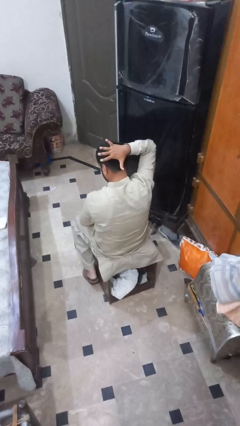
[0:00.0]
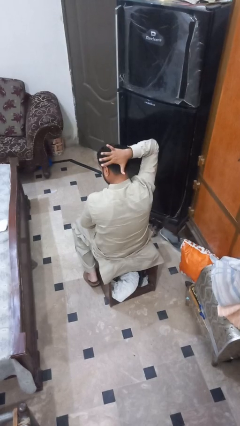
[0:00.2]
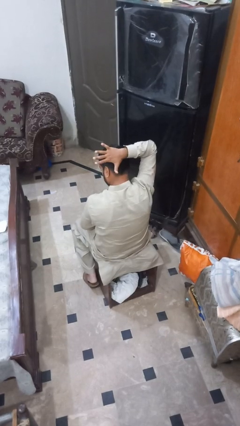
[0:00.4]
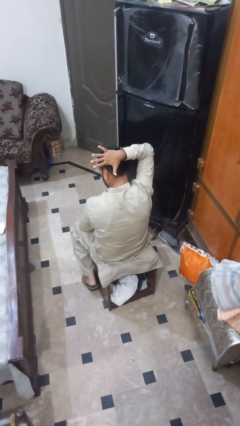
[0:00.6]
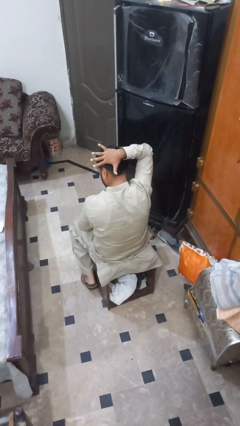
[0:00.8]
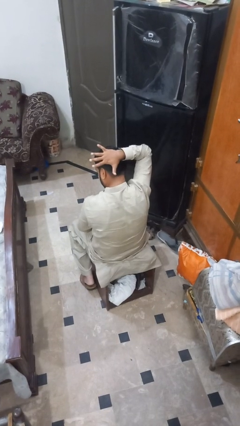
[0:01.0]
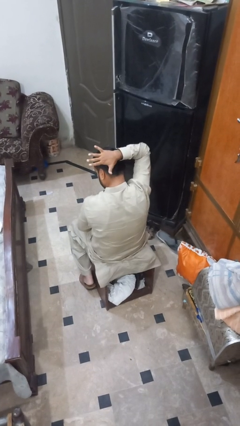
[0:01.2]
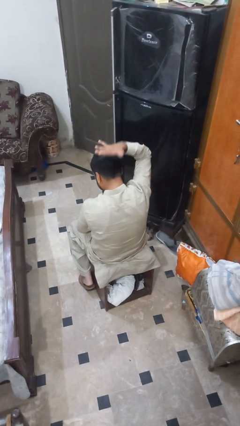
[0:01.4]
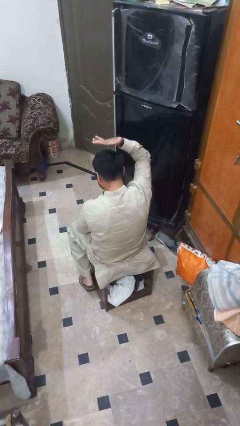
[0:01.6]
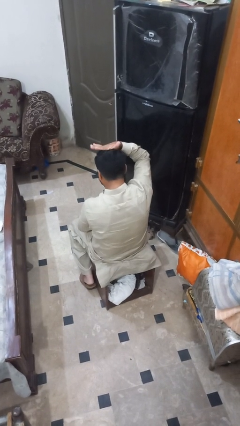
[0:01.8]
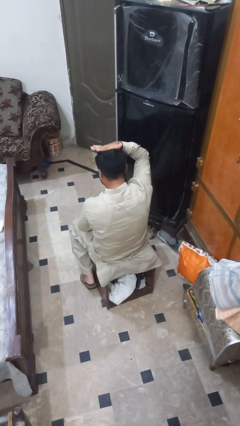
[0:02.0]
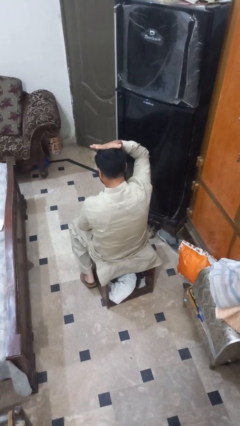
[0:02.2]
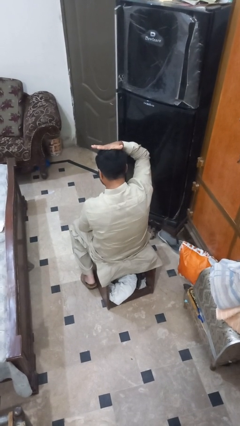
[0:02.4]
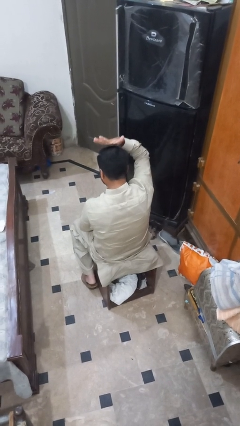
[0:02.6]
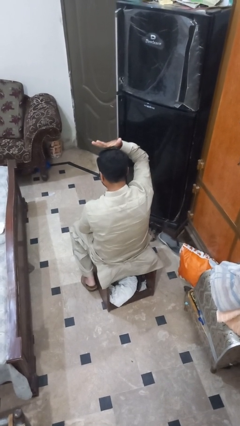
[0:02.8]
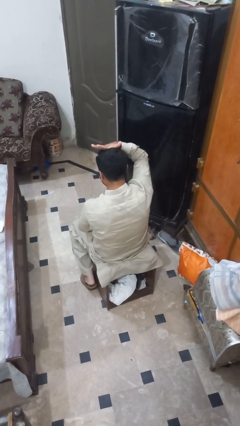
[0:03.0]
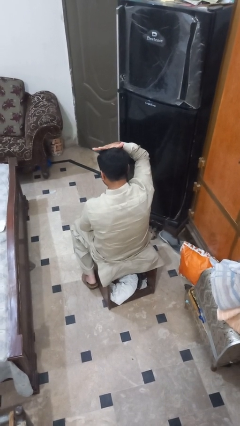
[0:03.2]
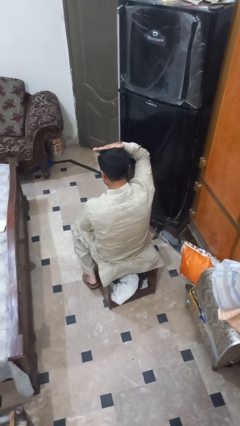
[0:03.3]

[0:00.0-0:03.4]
person pats head

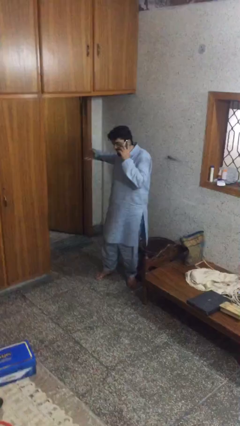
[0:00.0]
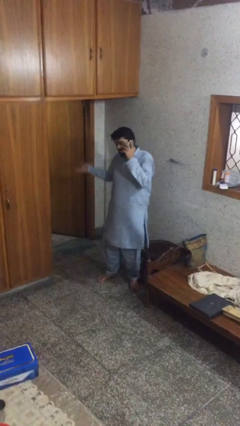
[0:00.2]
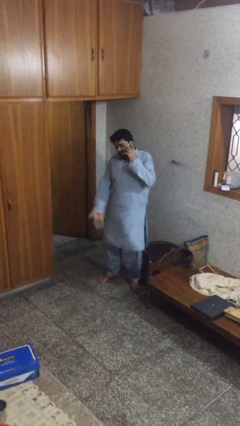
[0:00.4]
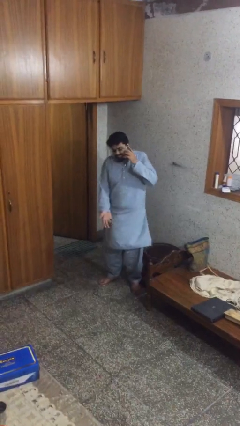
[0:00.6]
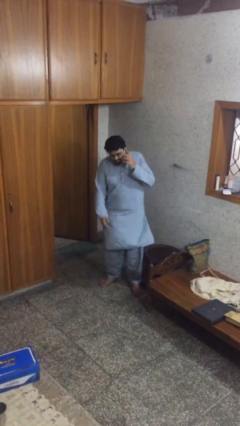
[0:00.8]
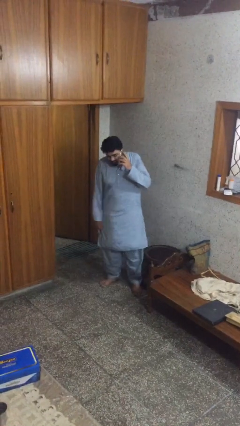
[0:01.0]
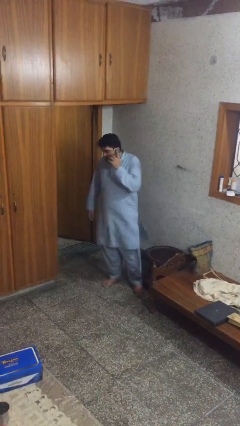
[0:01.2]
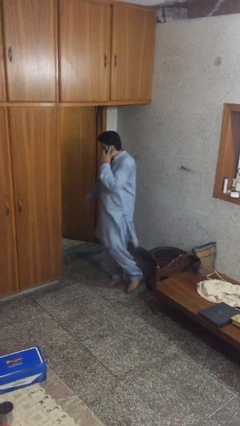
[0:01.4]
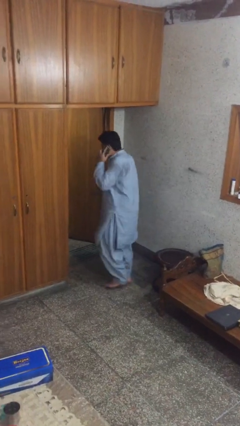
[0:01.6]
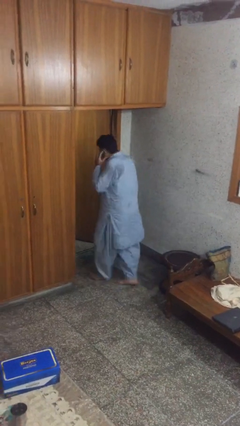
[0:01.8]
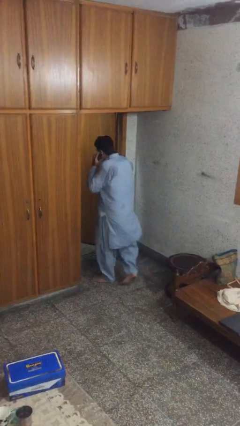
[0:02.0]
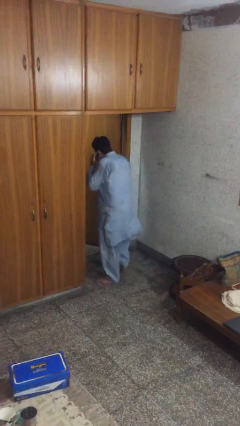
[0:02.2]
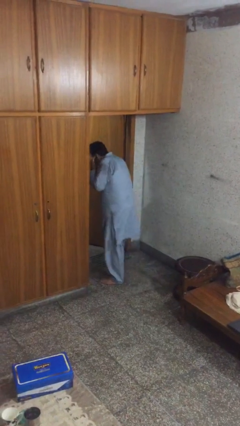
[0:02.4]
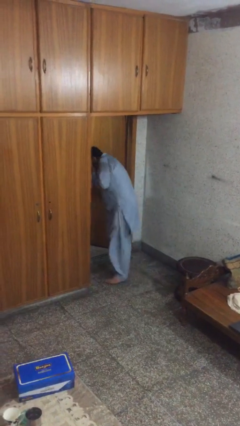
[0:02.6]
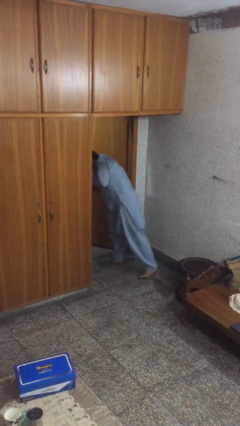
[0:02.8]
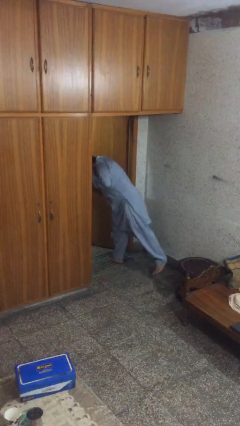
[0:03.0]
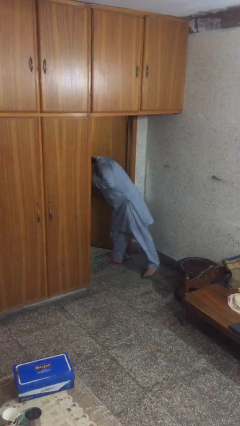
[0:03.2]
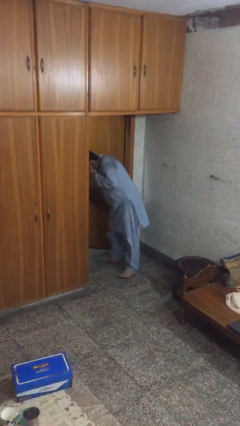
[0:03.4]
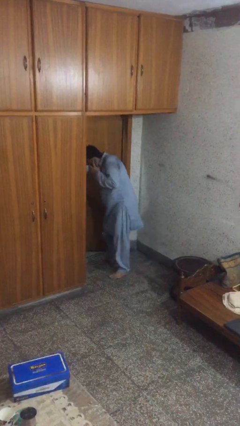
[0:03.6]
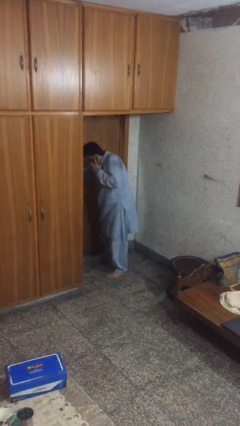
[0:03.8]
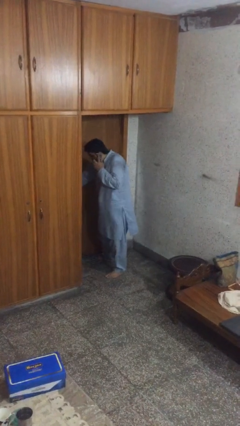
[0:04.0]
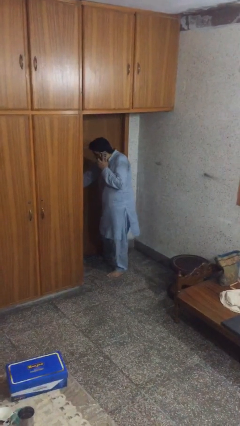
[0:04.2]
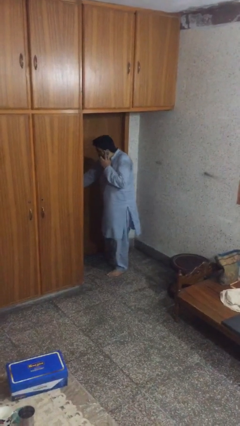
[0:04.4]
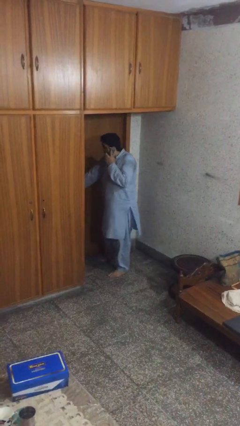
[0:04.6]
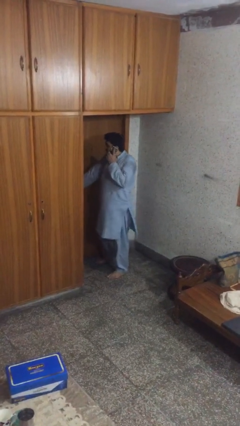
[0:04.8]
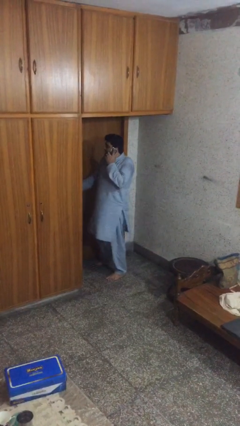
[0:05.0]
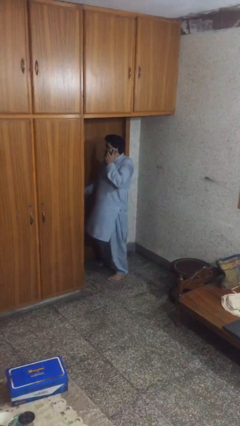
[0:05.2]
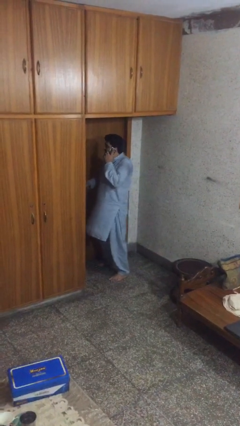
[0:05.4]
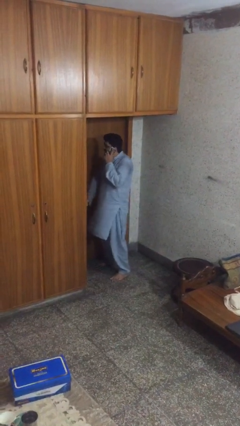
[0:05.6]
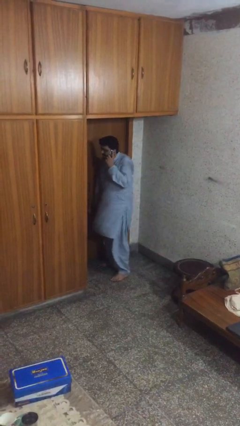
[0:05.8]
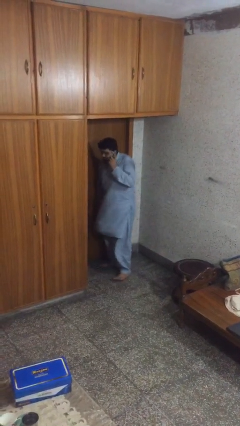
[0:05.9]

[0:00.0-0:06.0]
person closes facility door

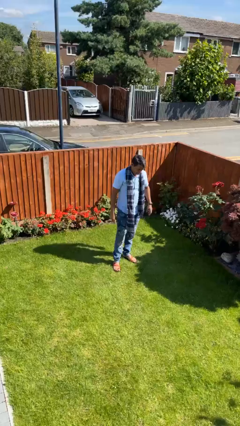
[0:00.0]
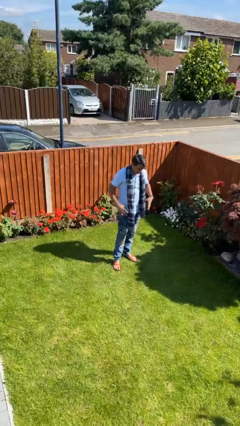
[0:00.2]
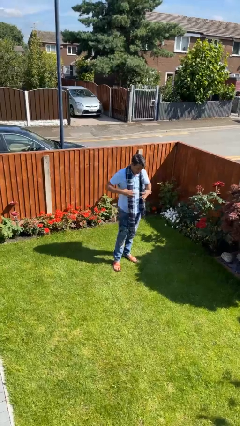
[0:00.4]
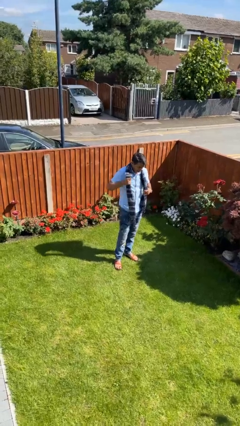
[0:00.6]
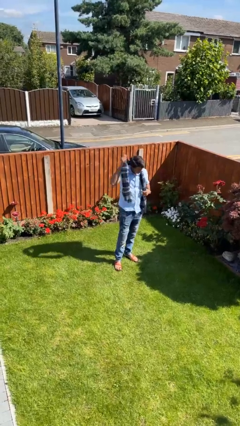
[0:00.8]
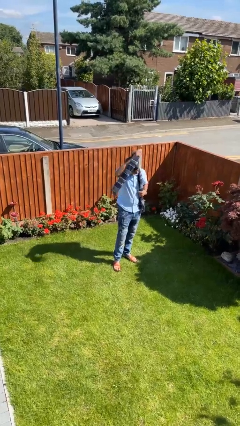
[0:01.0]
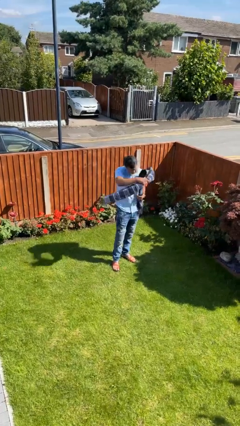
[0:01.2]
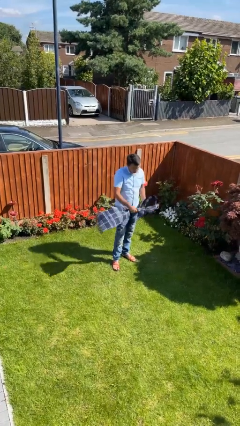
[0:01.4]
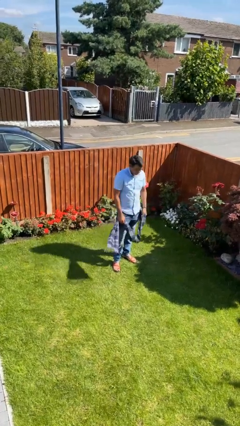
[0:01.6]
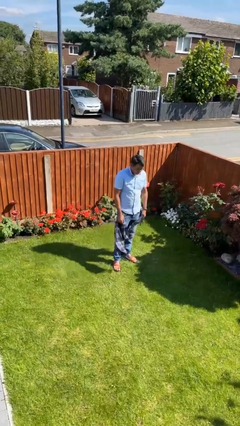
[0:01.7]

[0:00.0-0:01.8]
person takes off scarf

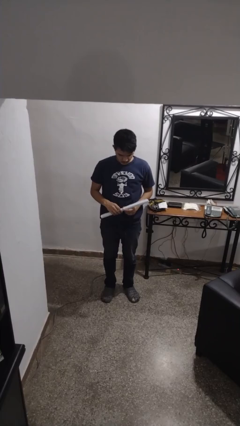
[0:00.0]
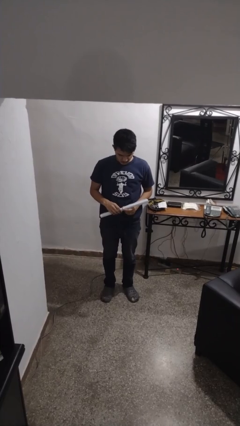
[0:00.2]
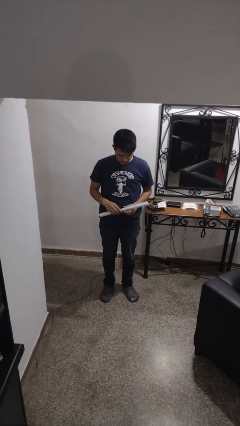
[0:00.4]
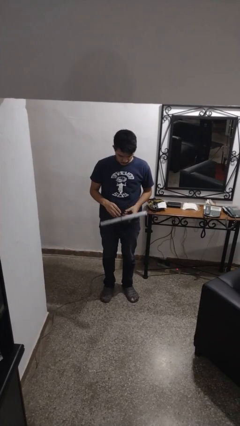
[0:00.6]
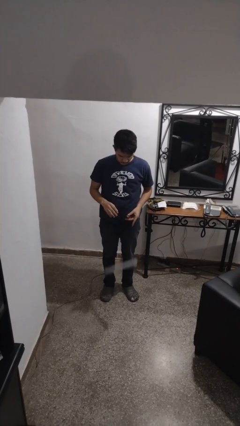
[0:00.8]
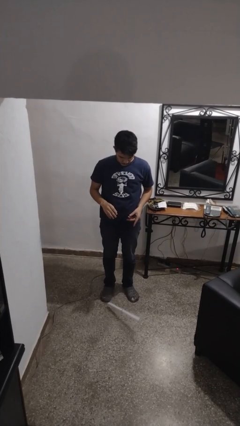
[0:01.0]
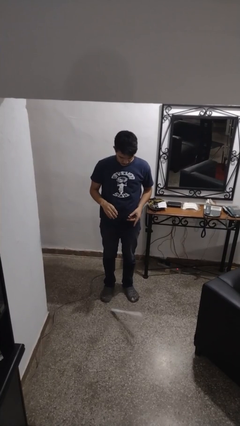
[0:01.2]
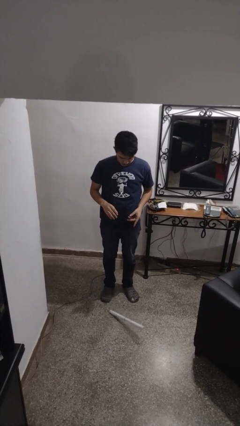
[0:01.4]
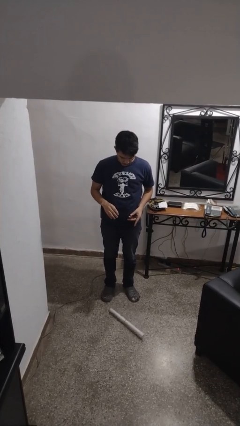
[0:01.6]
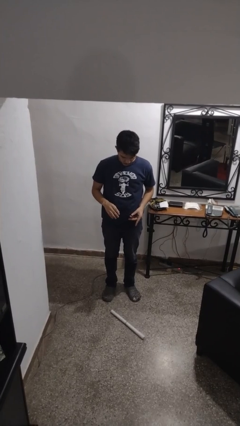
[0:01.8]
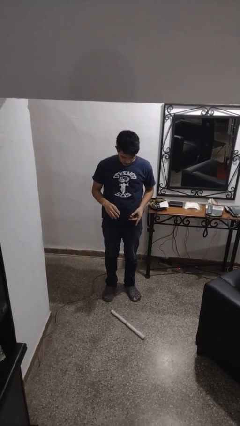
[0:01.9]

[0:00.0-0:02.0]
person drops object

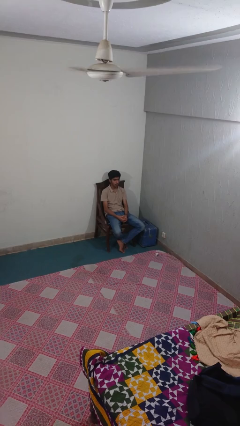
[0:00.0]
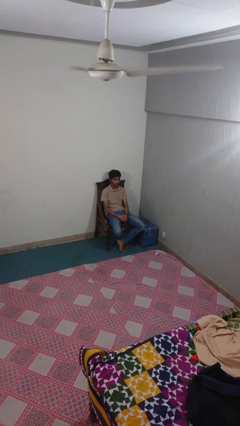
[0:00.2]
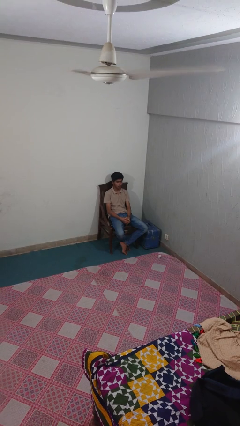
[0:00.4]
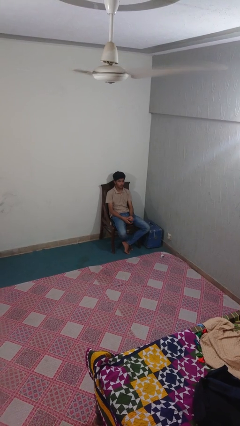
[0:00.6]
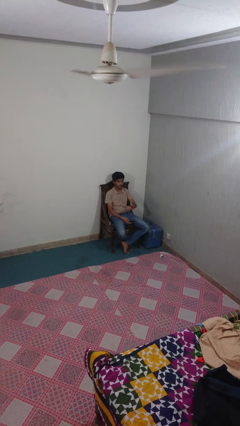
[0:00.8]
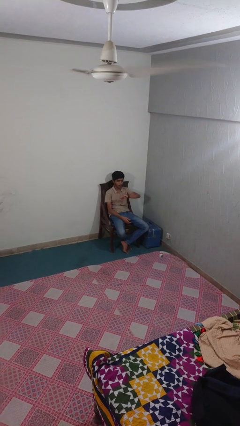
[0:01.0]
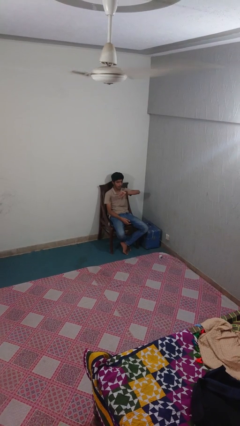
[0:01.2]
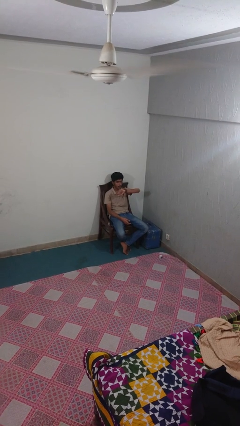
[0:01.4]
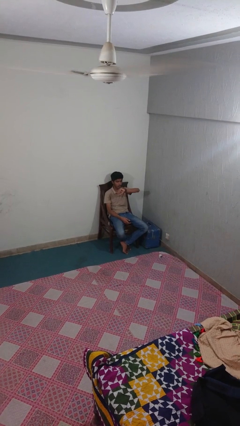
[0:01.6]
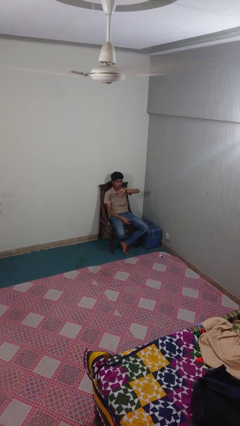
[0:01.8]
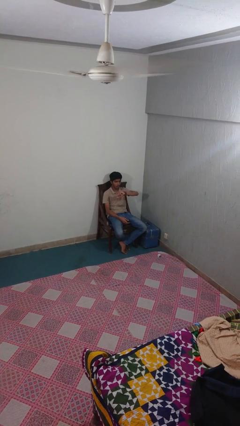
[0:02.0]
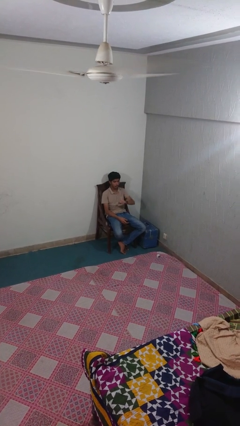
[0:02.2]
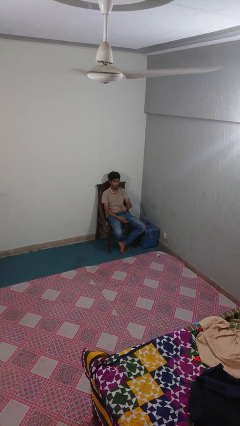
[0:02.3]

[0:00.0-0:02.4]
person looks at wristwatch

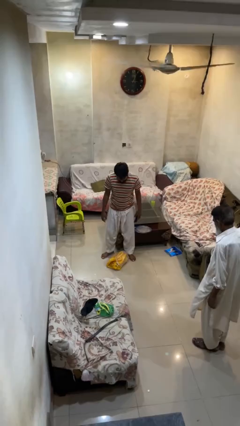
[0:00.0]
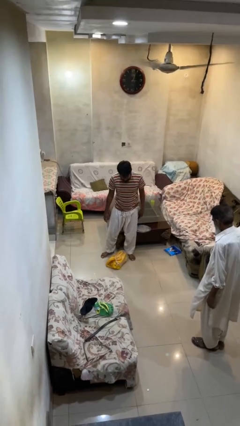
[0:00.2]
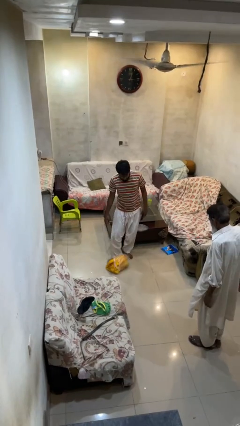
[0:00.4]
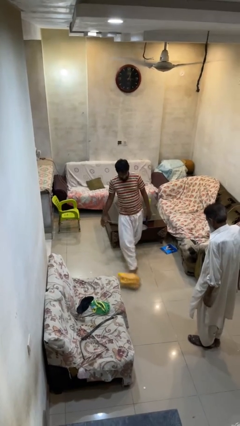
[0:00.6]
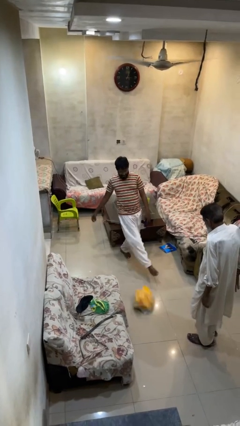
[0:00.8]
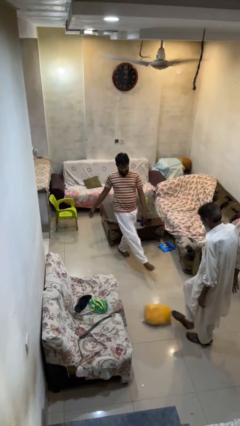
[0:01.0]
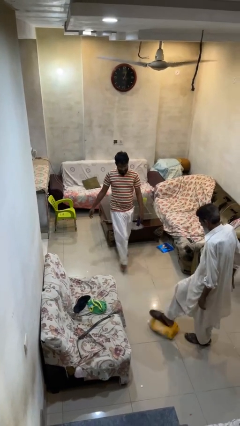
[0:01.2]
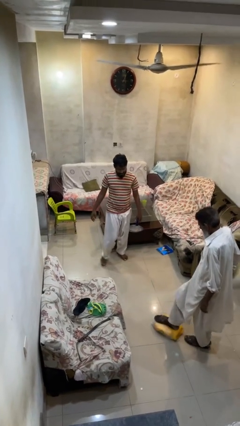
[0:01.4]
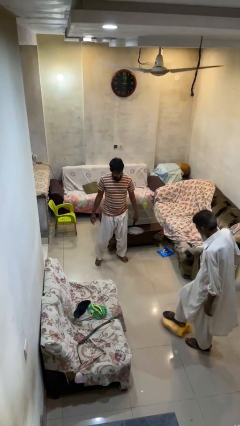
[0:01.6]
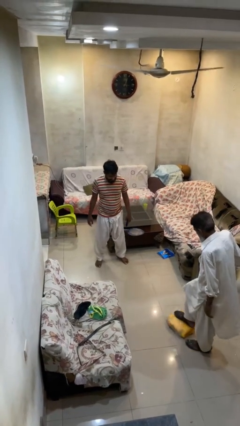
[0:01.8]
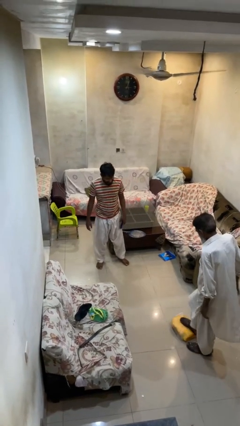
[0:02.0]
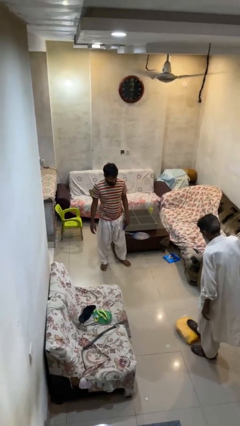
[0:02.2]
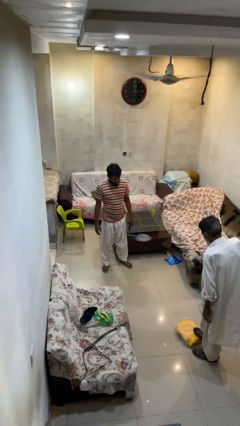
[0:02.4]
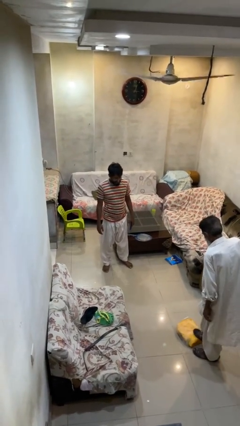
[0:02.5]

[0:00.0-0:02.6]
person kicks object to person
